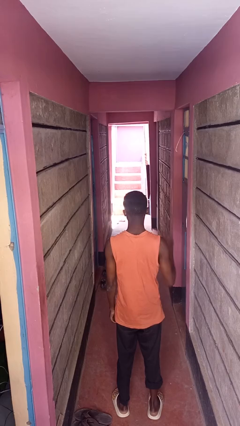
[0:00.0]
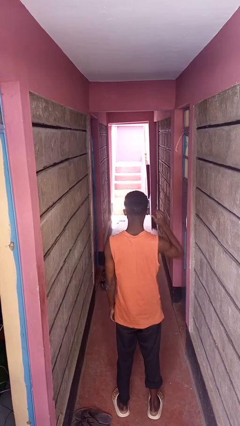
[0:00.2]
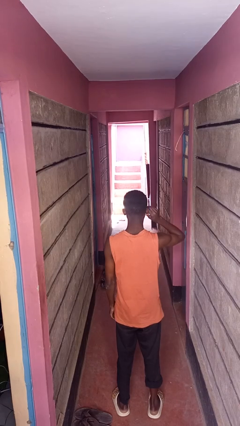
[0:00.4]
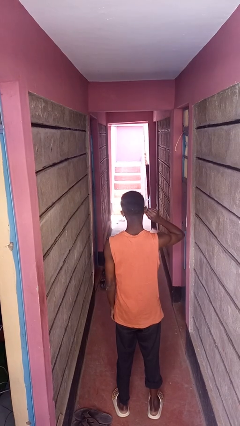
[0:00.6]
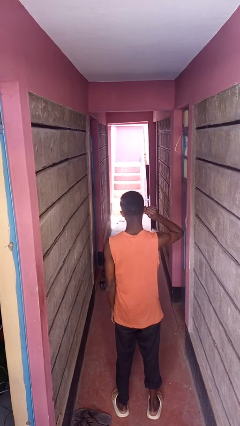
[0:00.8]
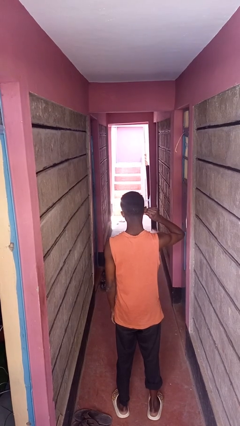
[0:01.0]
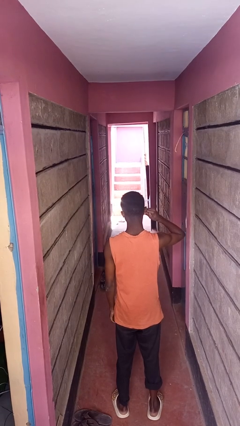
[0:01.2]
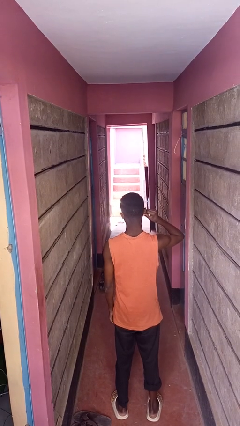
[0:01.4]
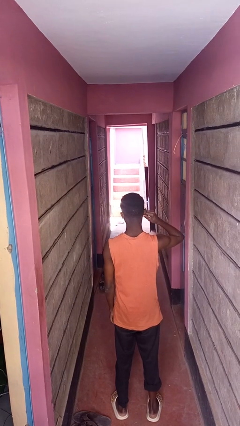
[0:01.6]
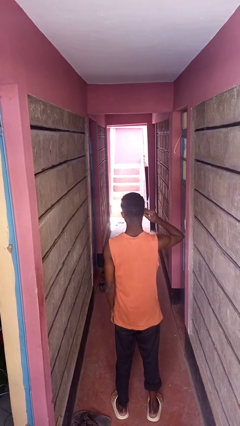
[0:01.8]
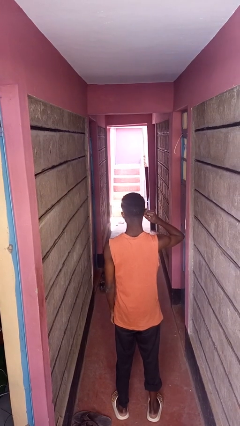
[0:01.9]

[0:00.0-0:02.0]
person touches earlobe

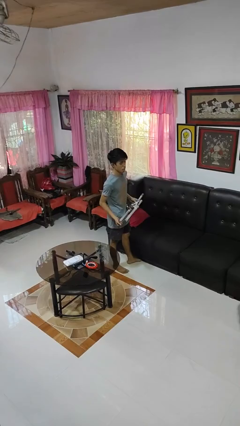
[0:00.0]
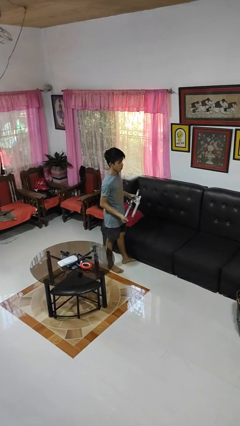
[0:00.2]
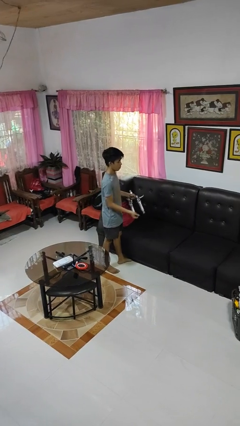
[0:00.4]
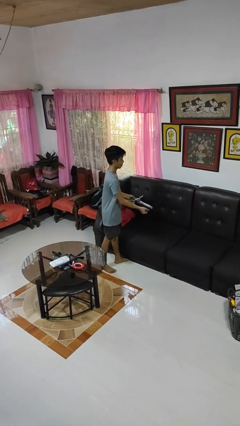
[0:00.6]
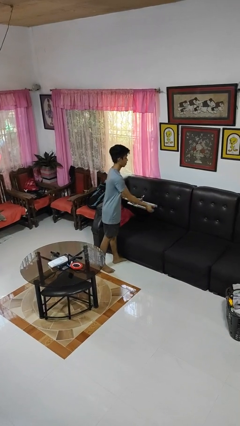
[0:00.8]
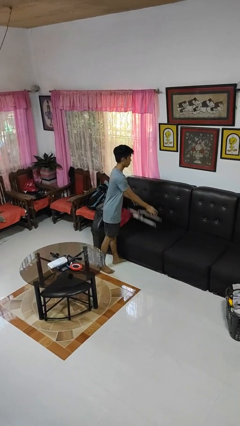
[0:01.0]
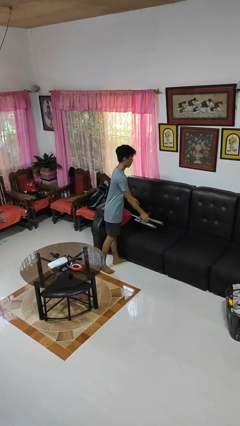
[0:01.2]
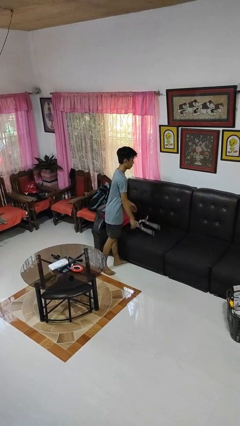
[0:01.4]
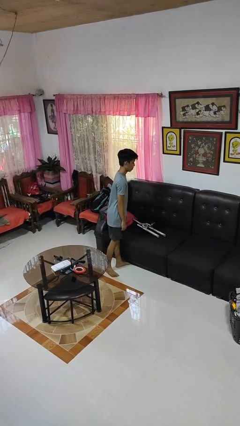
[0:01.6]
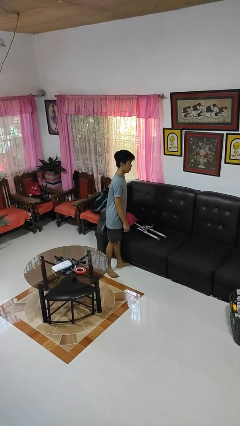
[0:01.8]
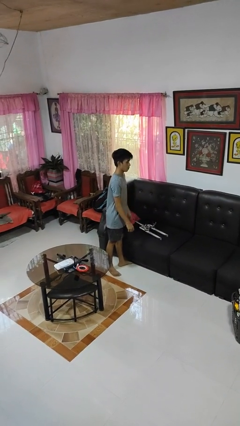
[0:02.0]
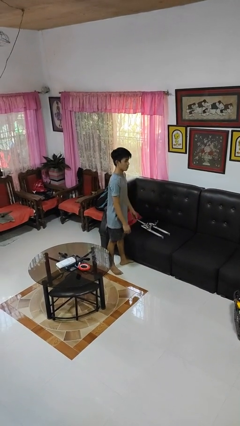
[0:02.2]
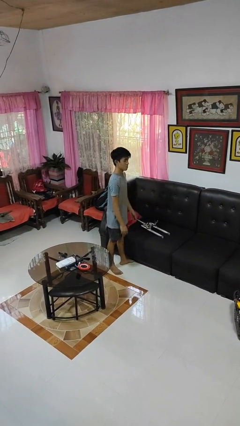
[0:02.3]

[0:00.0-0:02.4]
person puts down object on couch

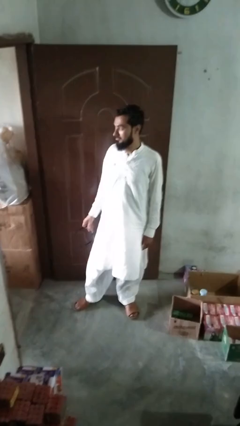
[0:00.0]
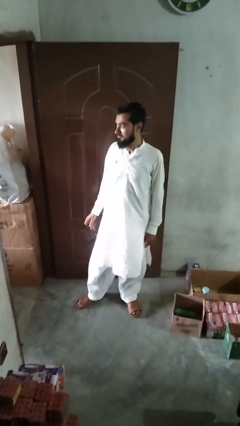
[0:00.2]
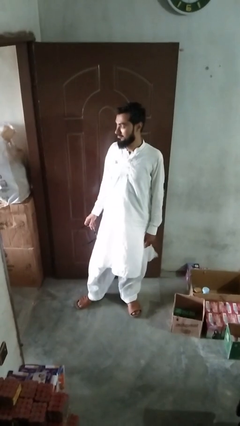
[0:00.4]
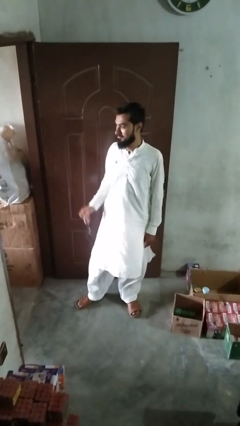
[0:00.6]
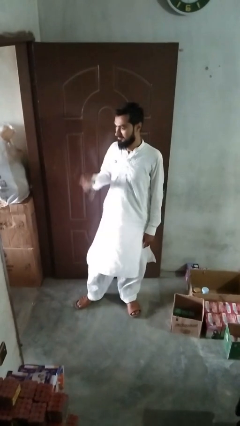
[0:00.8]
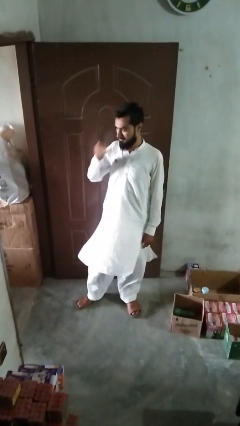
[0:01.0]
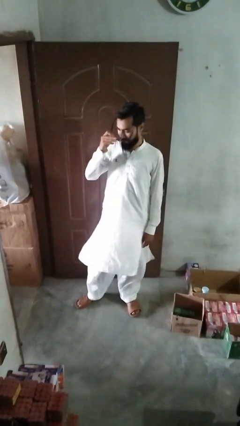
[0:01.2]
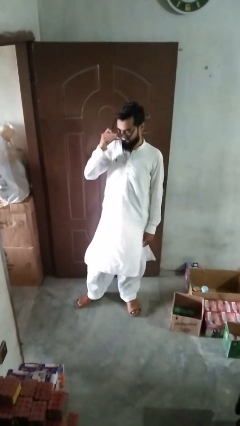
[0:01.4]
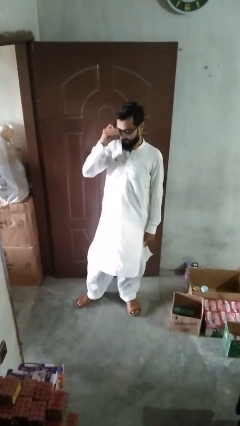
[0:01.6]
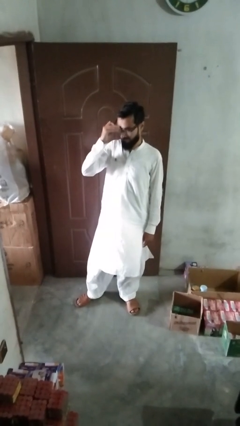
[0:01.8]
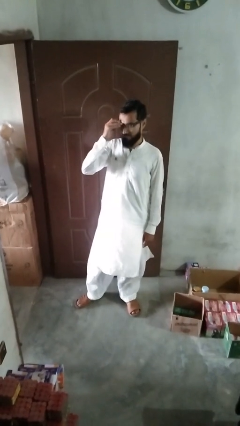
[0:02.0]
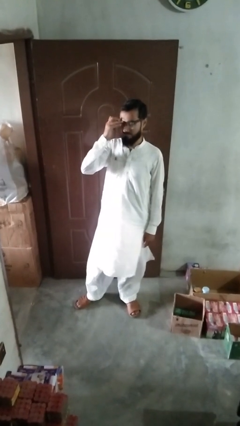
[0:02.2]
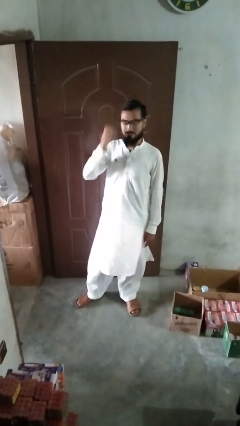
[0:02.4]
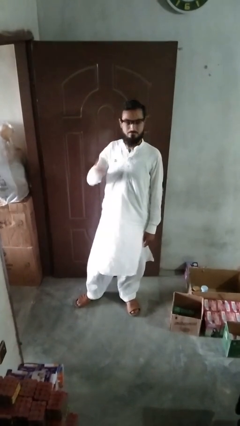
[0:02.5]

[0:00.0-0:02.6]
person puts on glasses

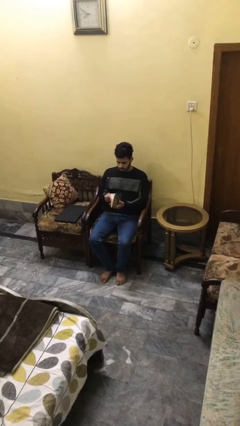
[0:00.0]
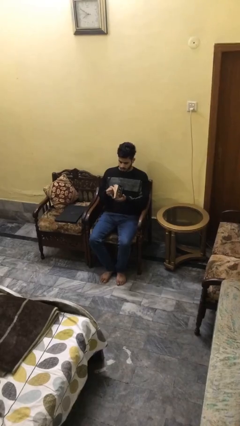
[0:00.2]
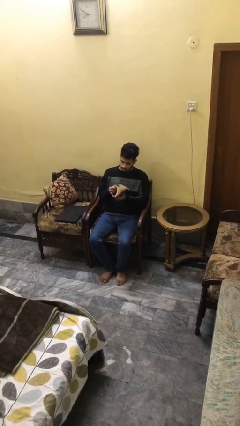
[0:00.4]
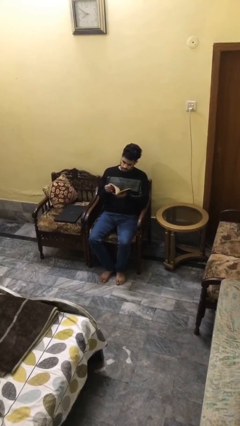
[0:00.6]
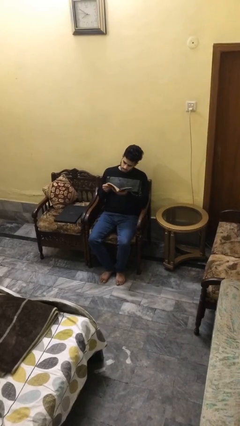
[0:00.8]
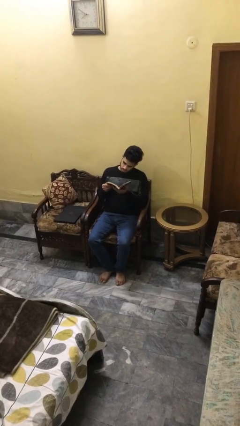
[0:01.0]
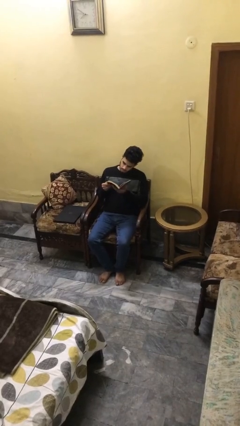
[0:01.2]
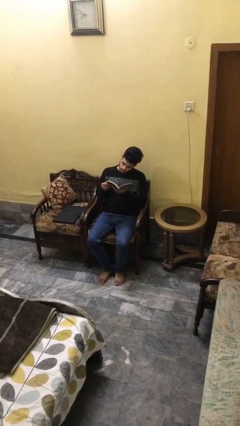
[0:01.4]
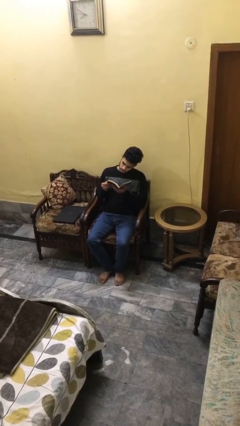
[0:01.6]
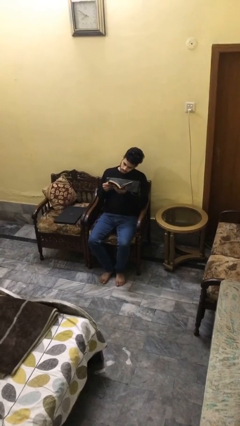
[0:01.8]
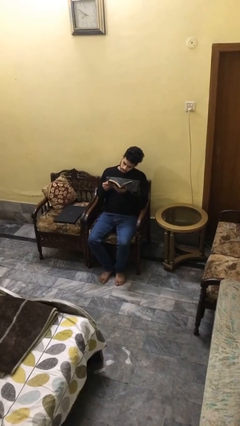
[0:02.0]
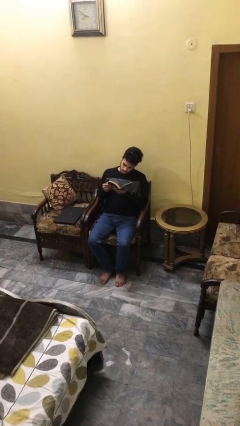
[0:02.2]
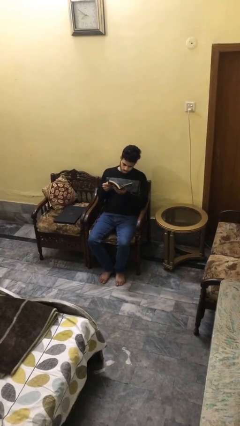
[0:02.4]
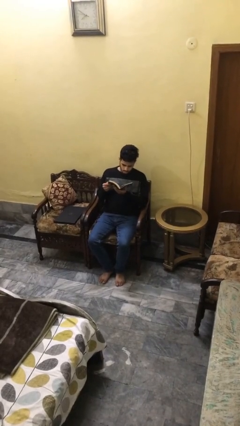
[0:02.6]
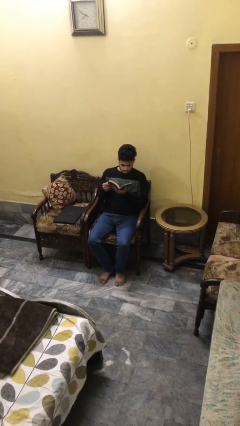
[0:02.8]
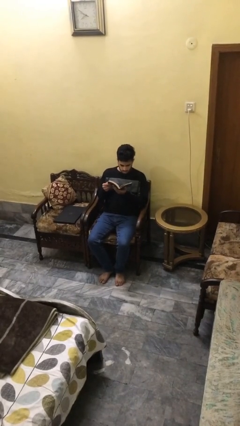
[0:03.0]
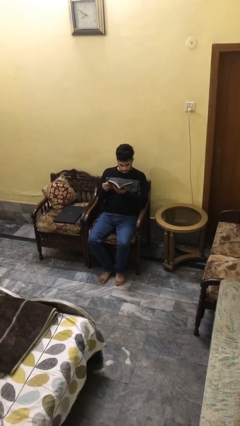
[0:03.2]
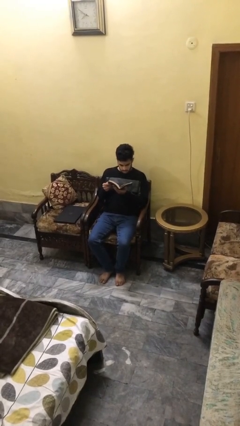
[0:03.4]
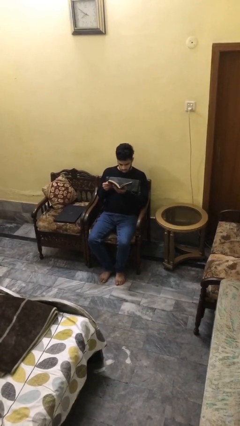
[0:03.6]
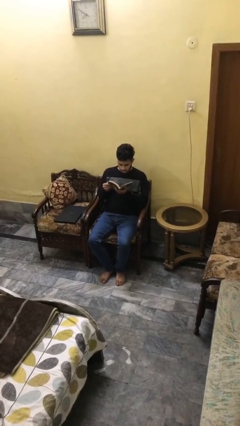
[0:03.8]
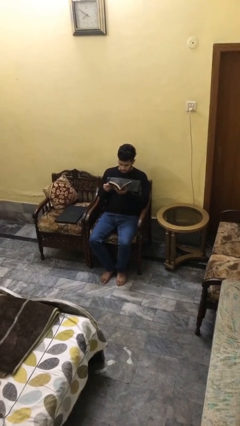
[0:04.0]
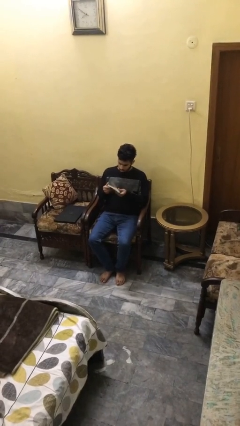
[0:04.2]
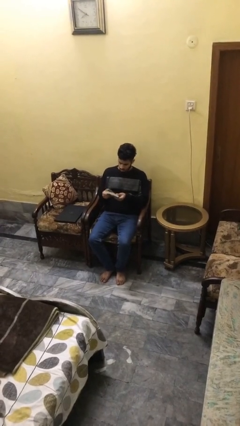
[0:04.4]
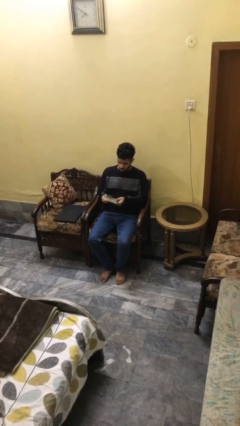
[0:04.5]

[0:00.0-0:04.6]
person reads document

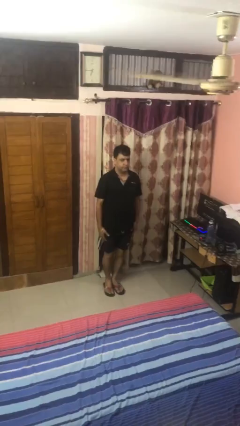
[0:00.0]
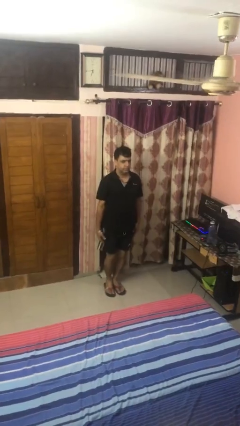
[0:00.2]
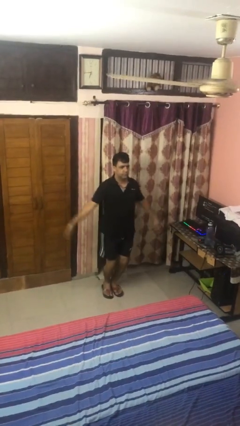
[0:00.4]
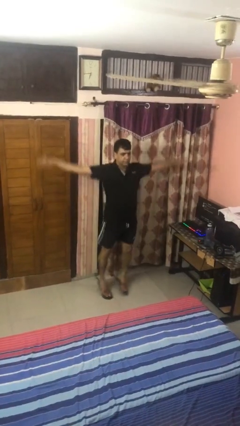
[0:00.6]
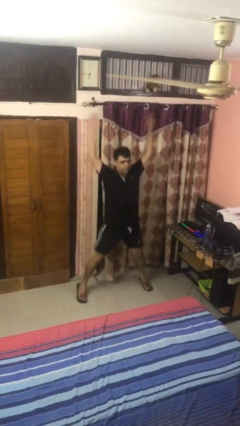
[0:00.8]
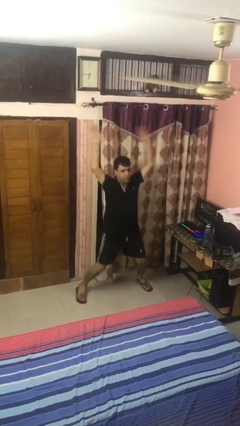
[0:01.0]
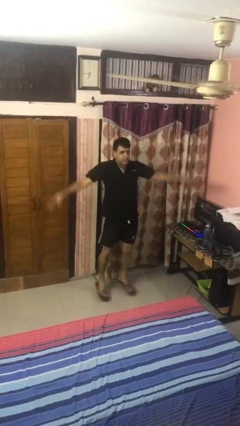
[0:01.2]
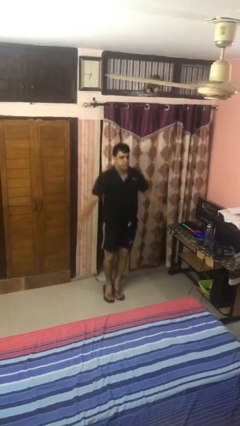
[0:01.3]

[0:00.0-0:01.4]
person exercises with jumping jacks

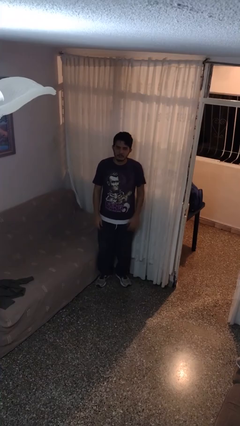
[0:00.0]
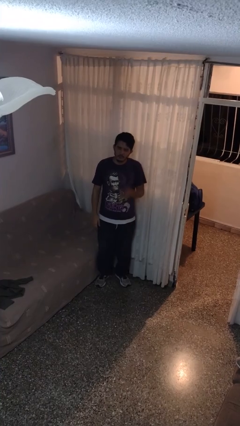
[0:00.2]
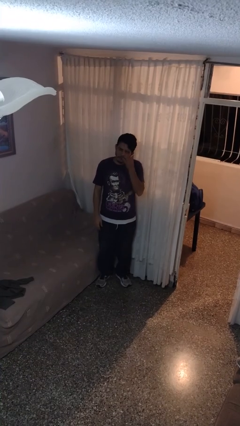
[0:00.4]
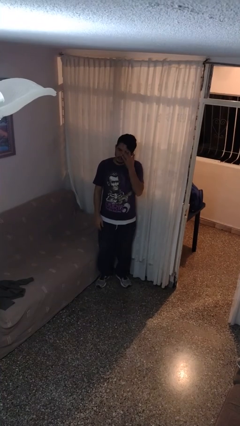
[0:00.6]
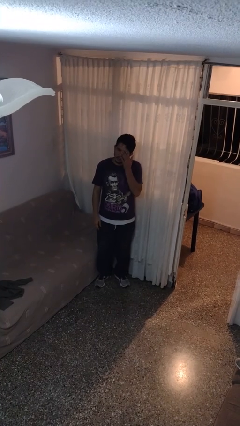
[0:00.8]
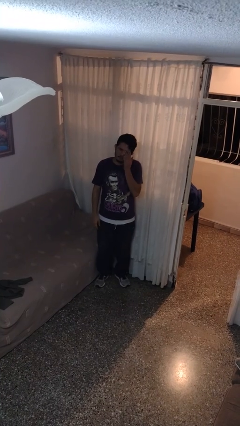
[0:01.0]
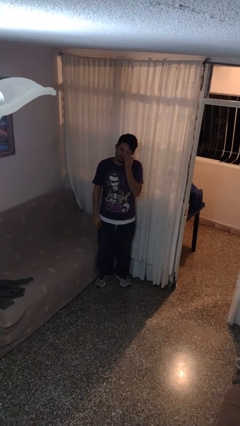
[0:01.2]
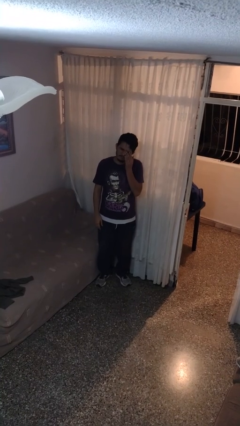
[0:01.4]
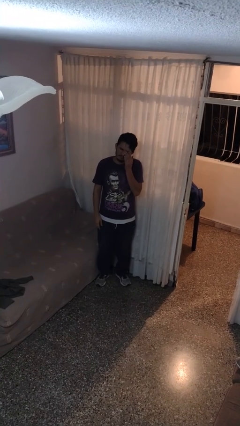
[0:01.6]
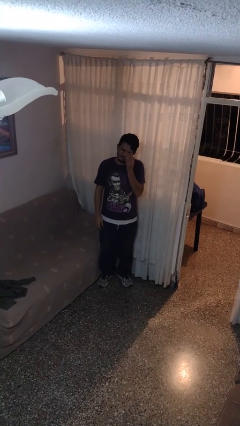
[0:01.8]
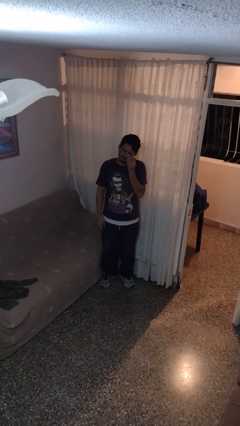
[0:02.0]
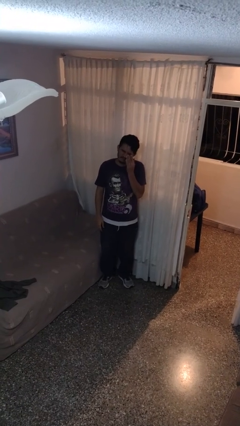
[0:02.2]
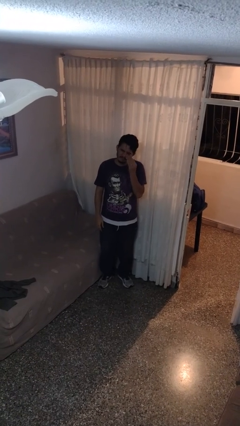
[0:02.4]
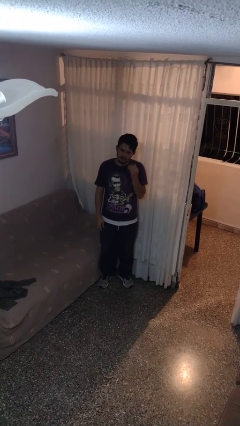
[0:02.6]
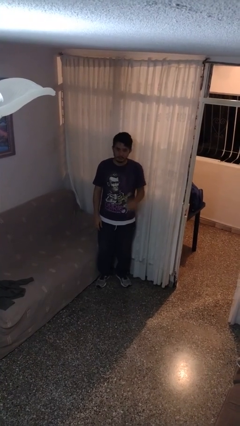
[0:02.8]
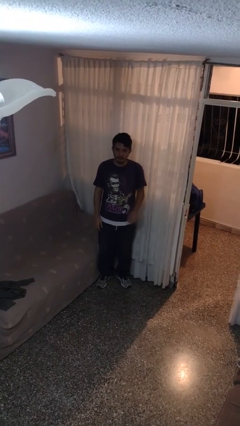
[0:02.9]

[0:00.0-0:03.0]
person rubs eyes

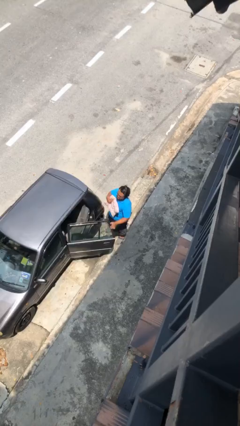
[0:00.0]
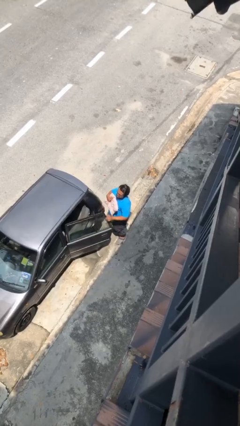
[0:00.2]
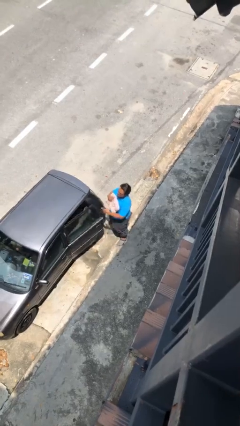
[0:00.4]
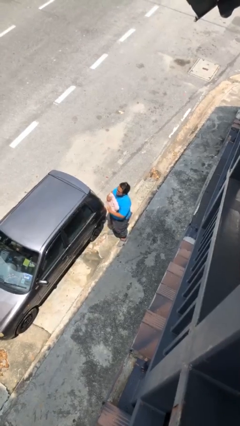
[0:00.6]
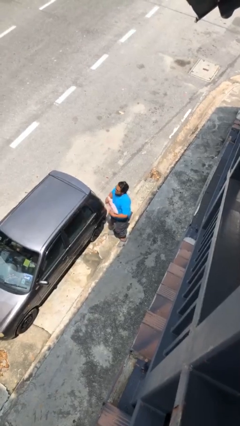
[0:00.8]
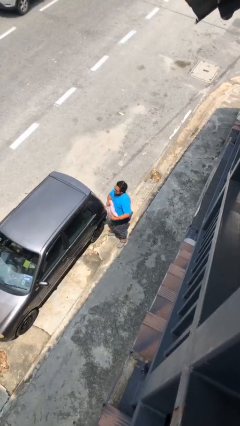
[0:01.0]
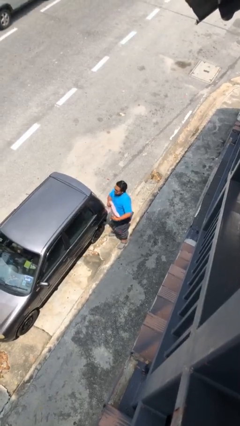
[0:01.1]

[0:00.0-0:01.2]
person closes car door
